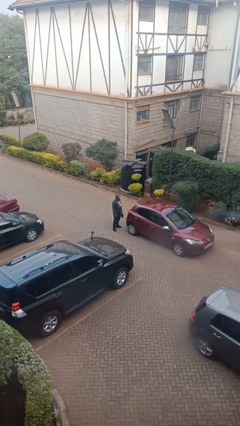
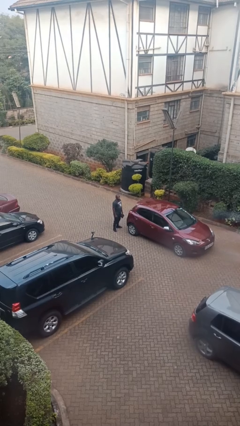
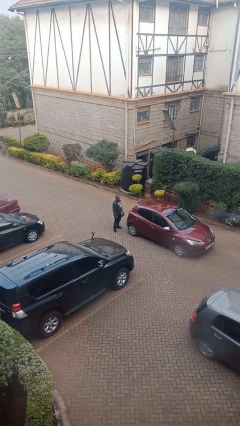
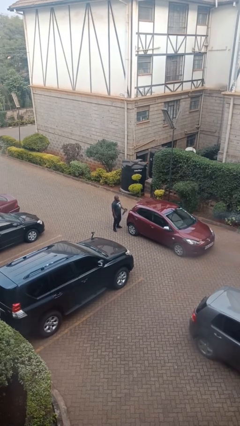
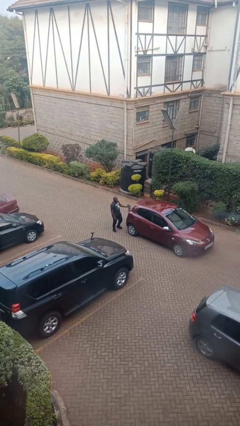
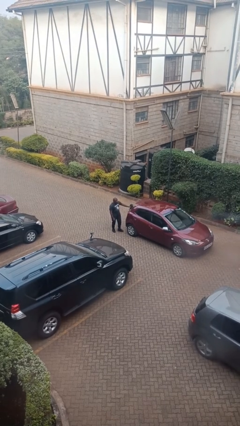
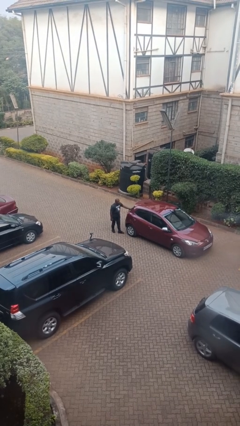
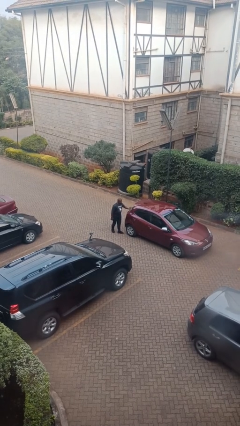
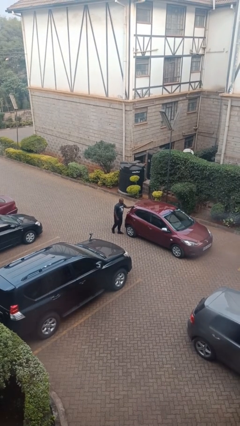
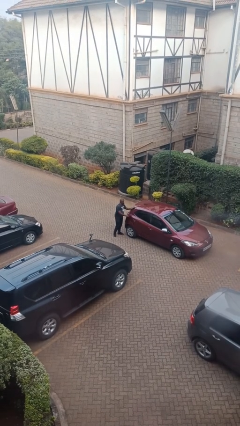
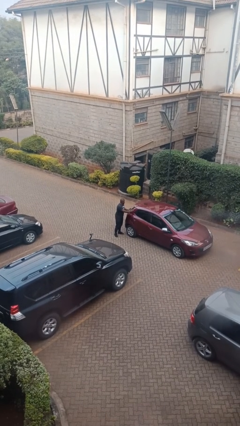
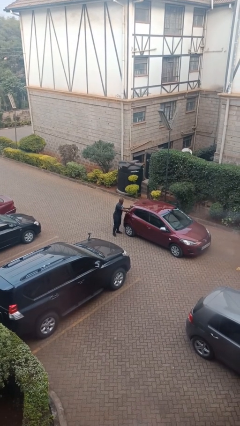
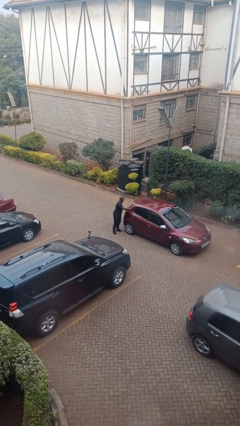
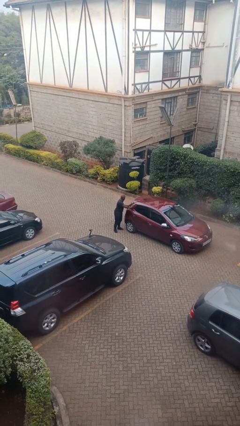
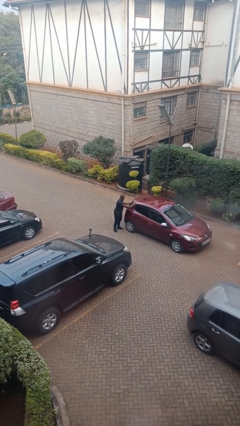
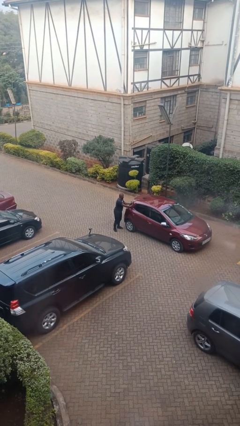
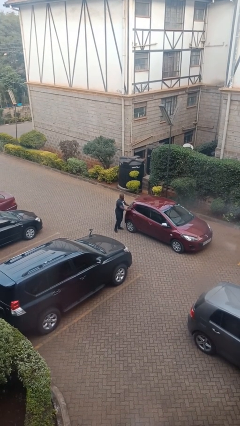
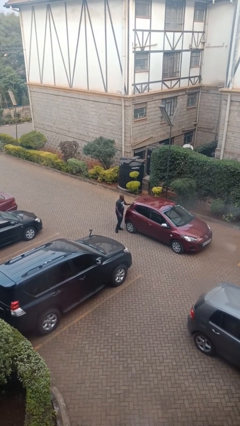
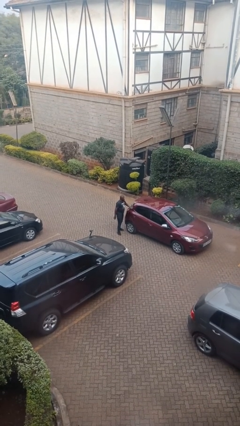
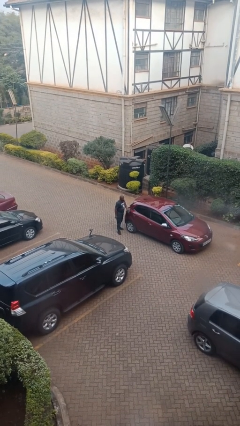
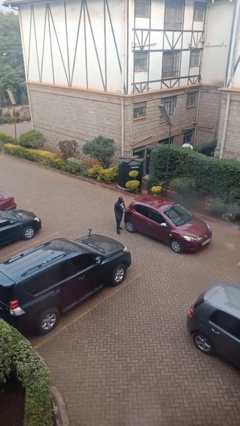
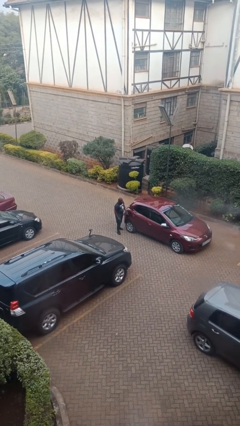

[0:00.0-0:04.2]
person polishes car with rag

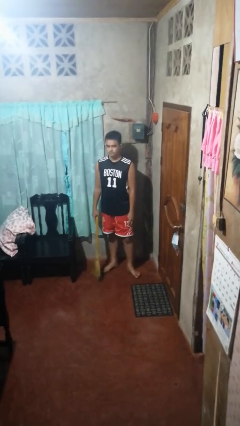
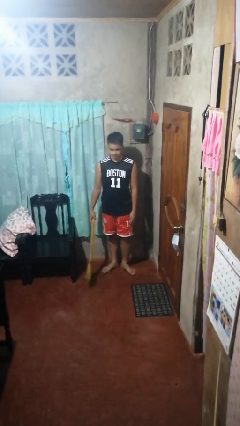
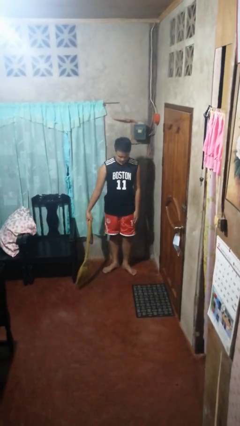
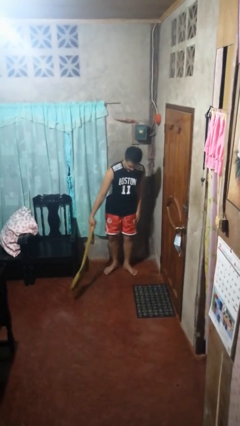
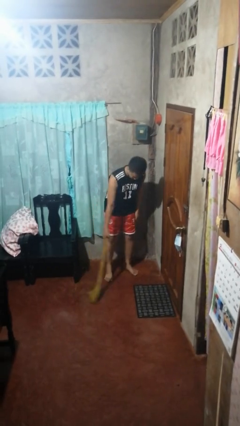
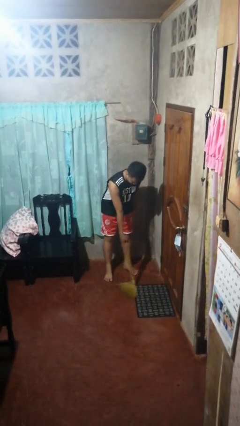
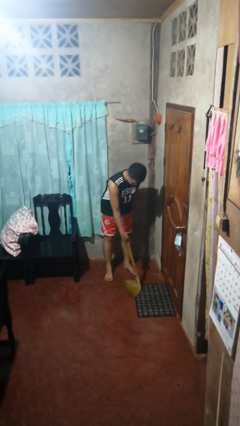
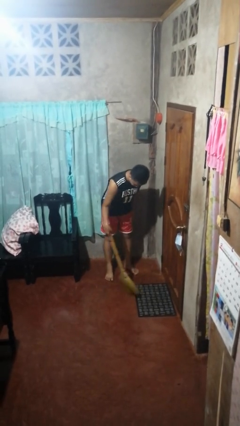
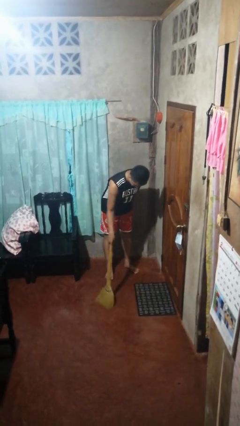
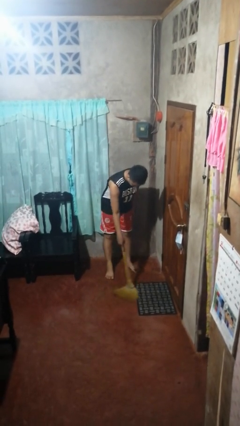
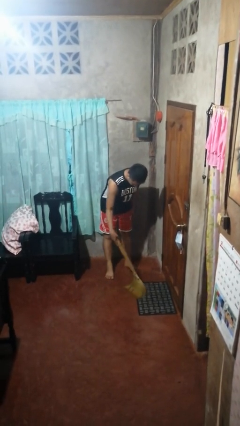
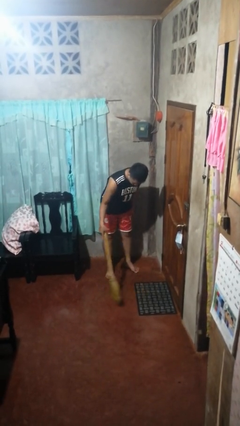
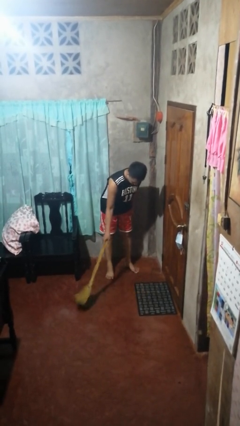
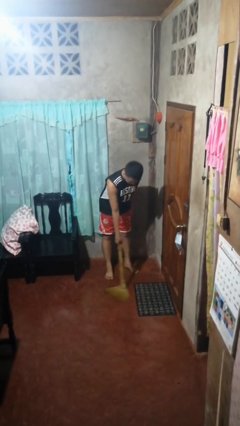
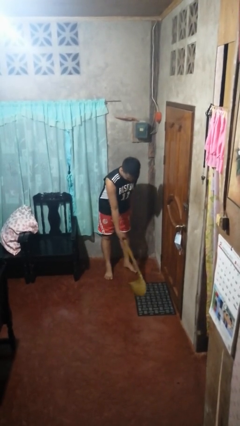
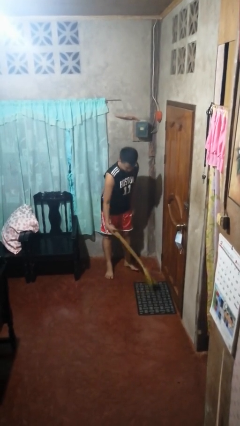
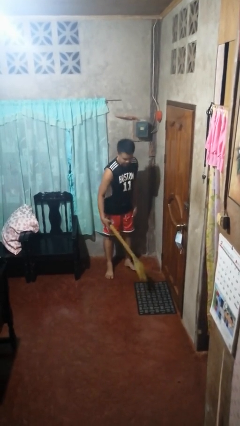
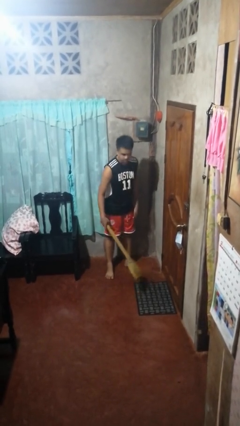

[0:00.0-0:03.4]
person sweeps floor

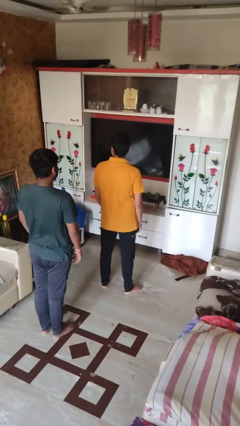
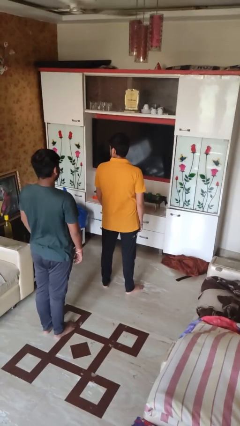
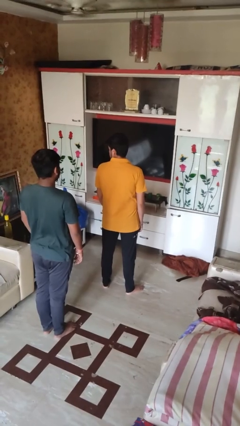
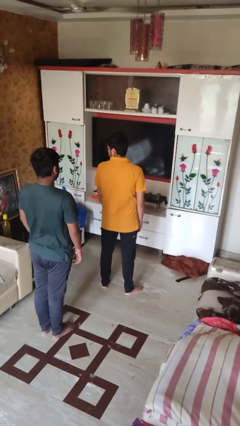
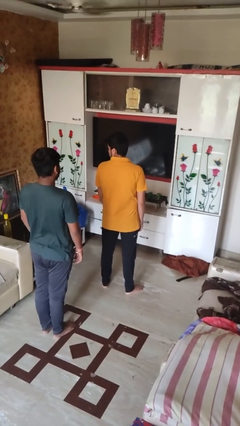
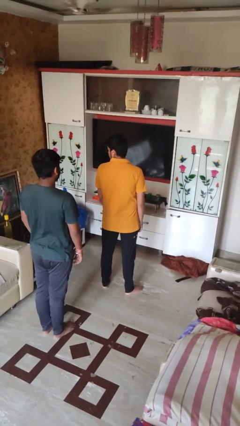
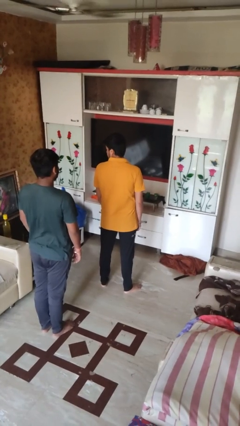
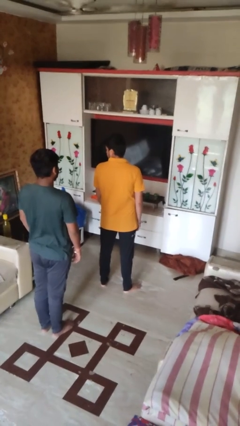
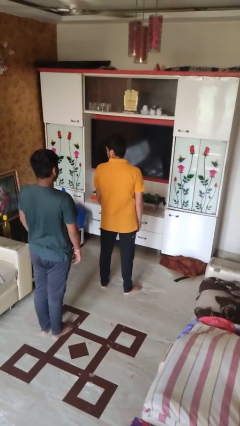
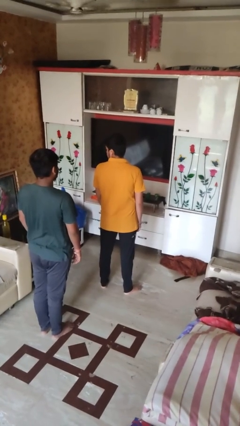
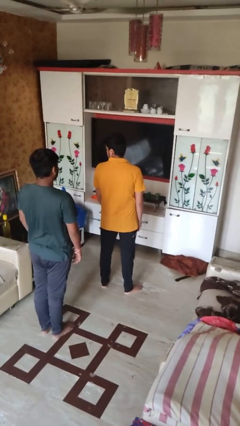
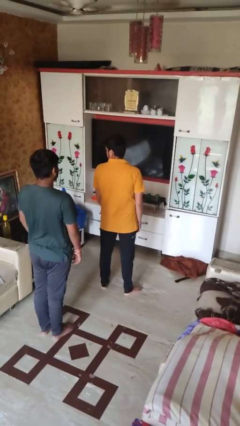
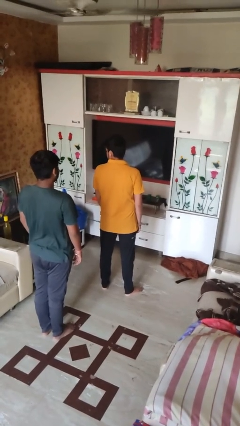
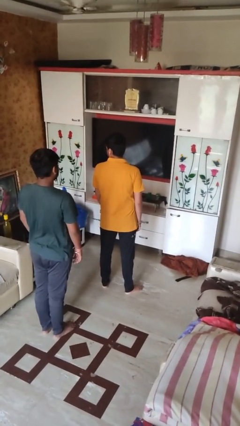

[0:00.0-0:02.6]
person looks over shoulder

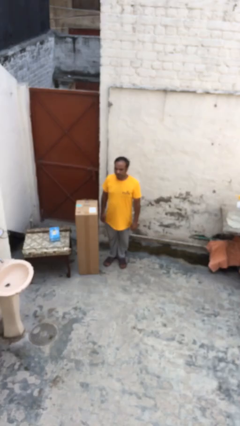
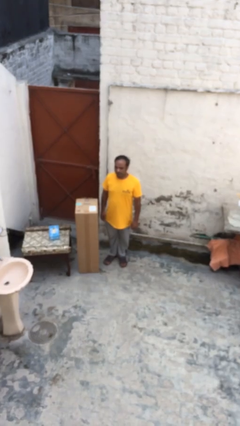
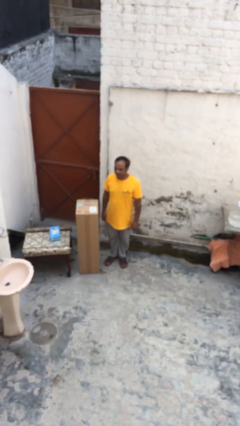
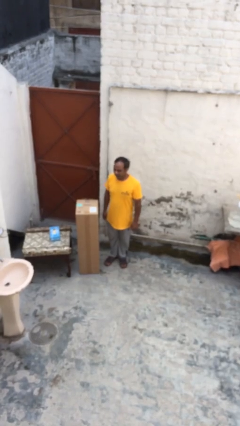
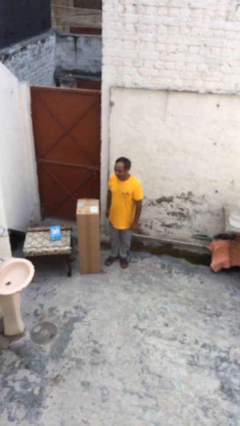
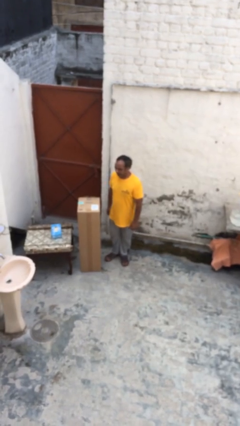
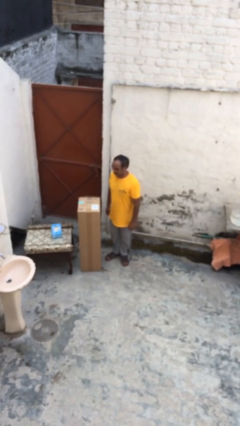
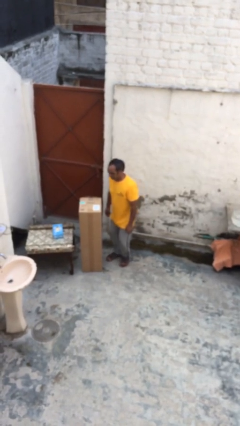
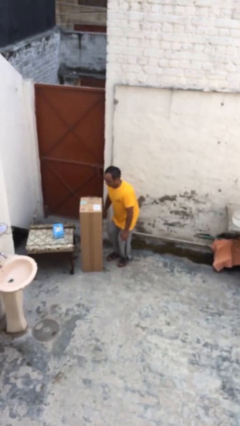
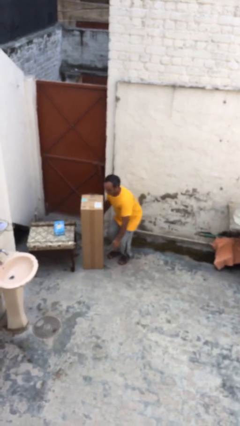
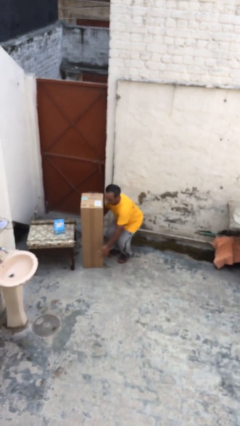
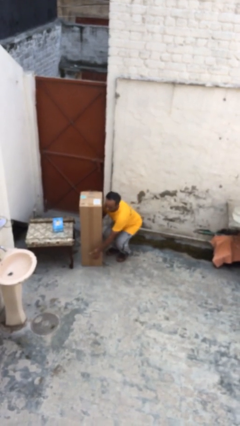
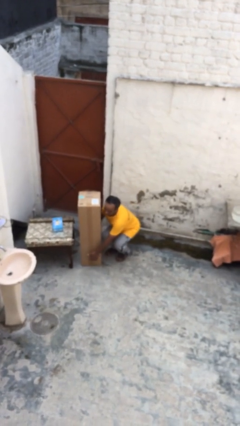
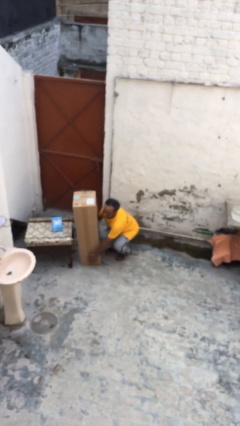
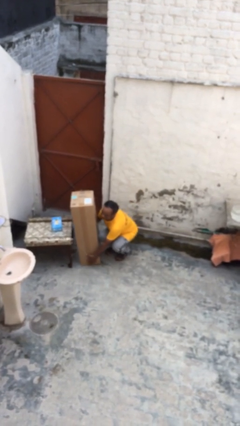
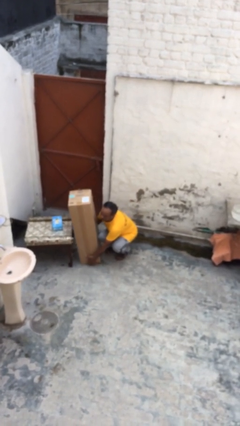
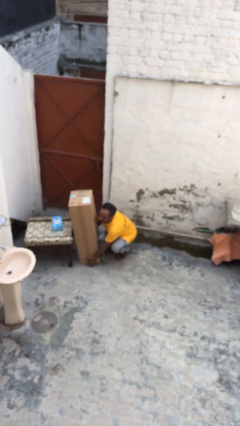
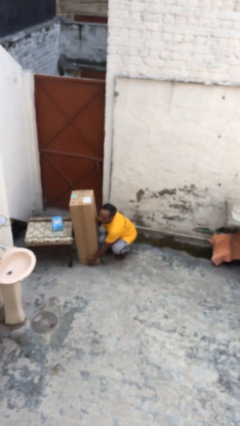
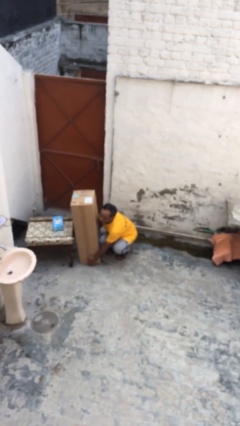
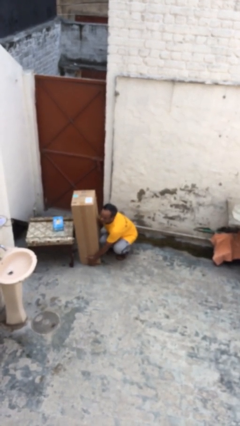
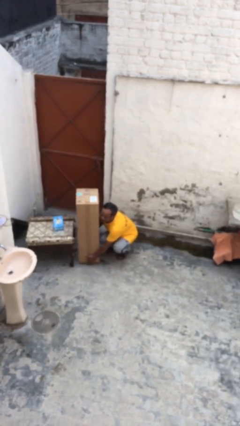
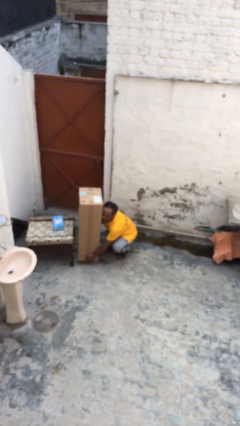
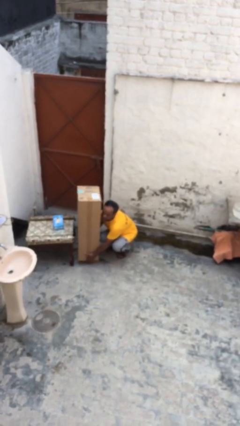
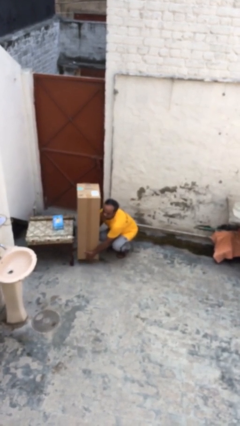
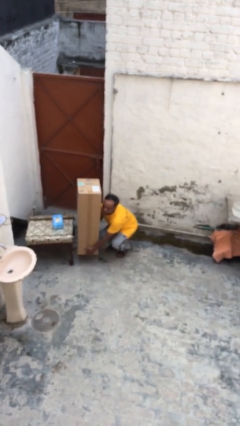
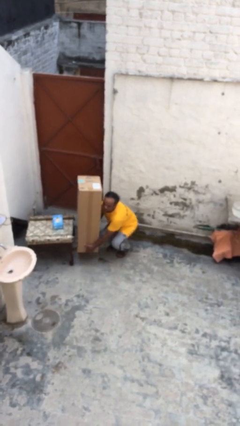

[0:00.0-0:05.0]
person picks up object from floor

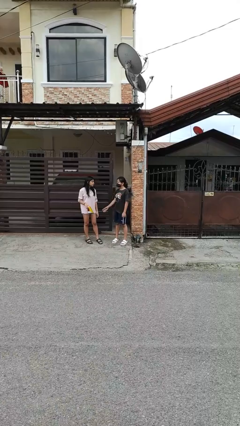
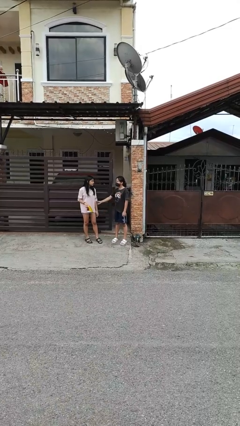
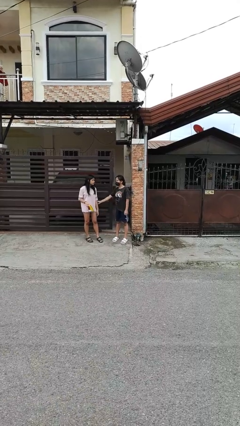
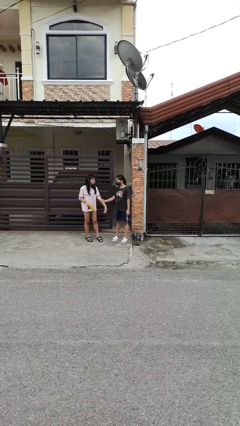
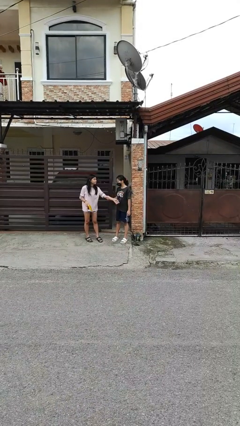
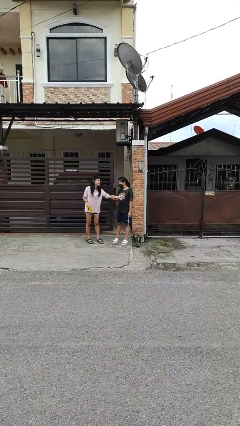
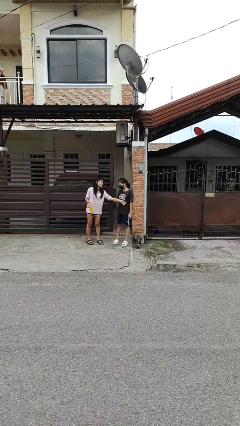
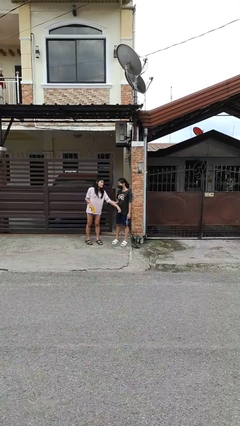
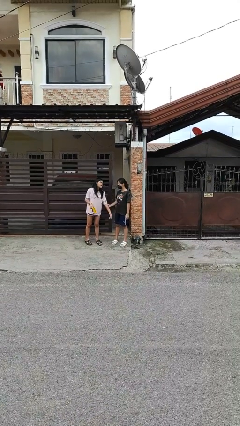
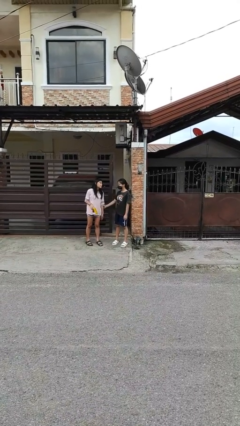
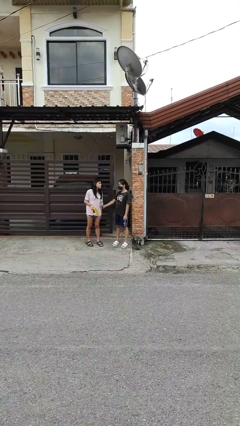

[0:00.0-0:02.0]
person grabs person by forearm

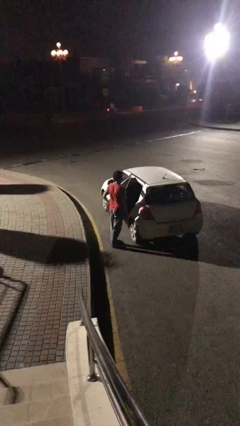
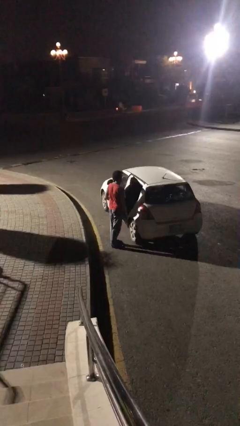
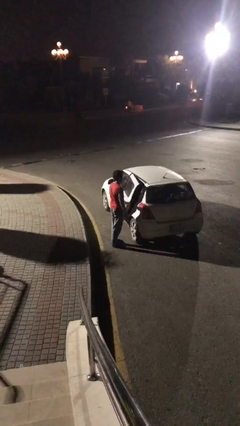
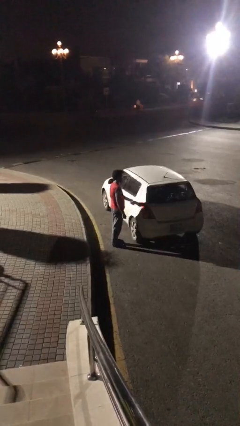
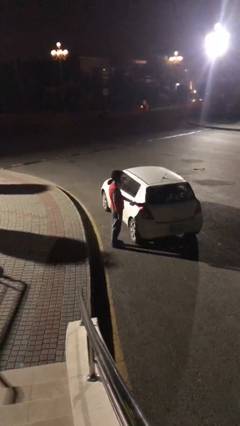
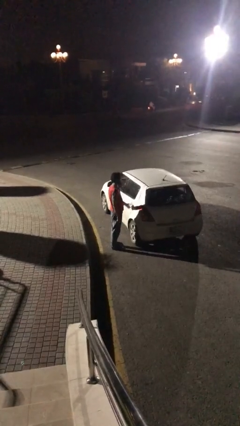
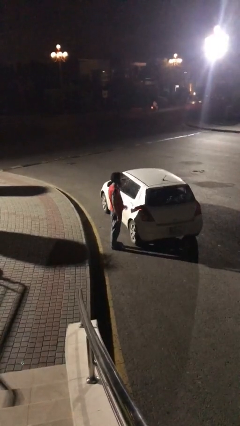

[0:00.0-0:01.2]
person closes car door
